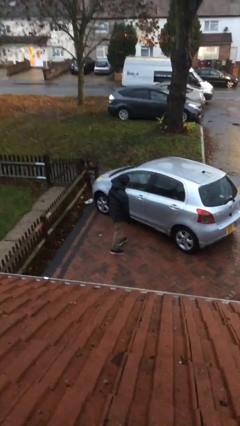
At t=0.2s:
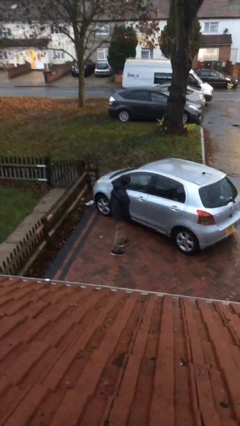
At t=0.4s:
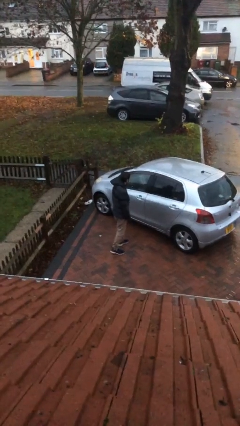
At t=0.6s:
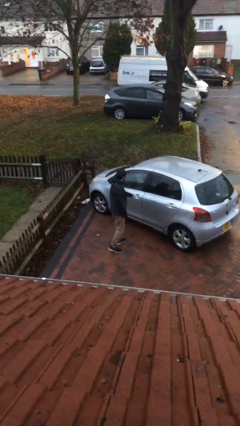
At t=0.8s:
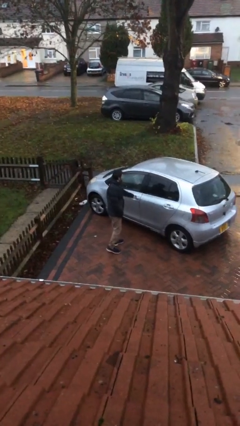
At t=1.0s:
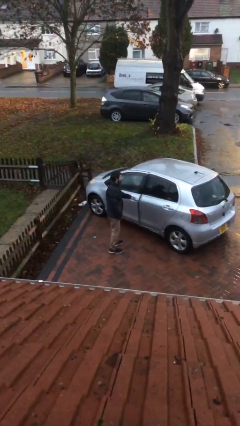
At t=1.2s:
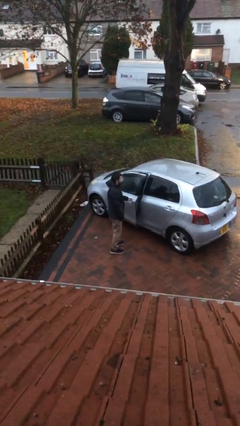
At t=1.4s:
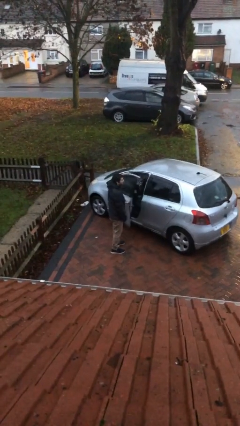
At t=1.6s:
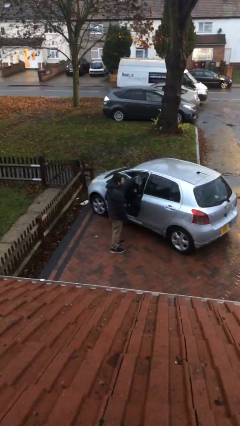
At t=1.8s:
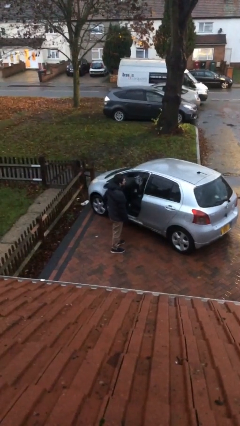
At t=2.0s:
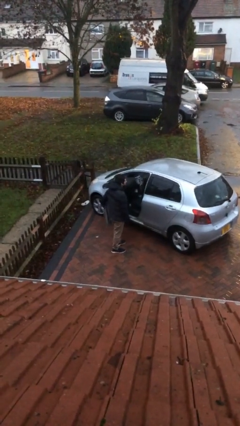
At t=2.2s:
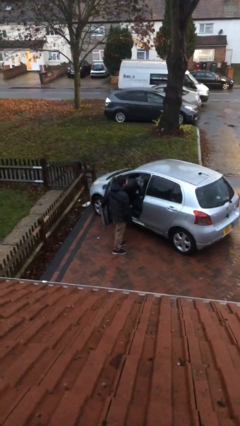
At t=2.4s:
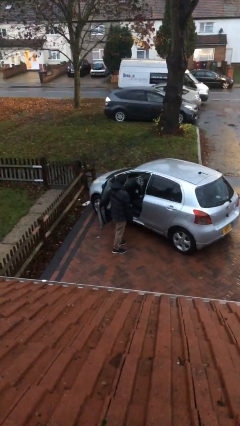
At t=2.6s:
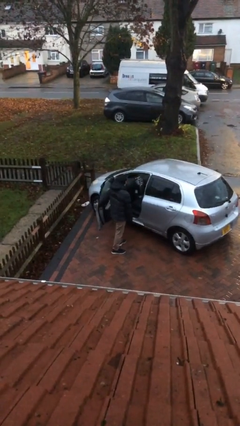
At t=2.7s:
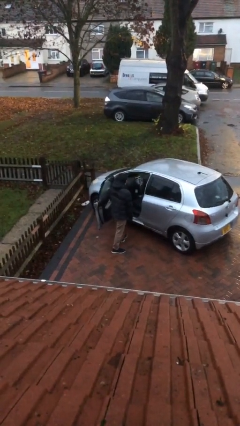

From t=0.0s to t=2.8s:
person opens car door

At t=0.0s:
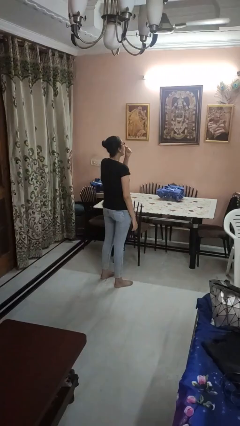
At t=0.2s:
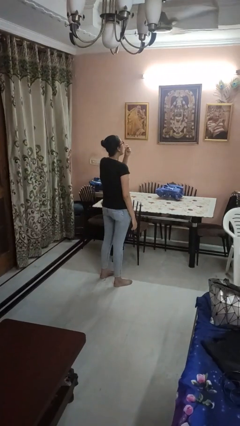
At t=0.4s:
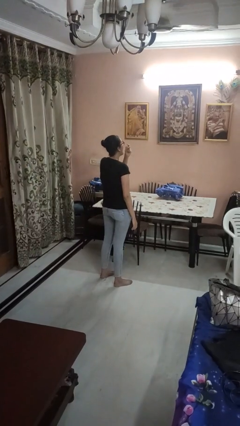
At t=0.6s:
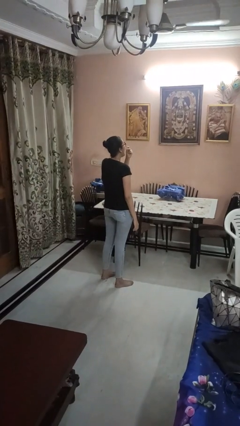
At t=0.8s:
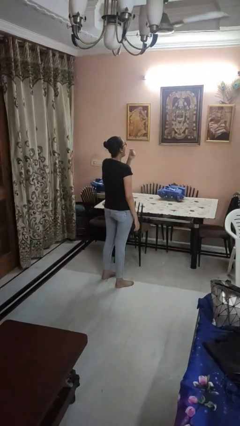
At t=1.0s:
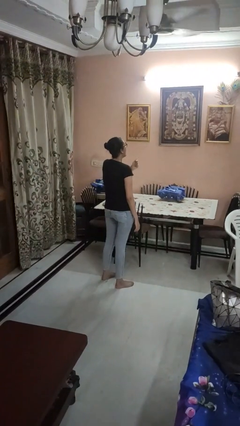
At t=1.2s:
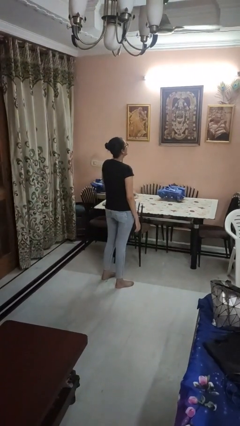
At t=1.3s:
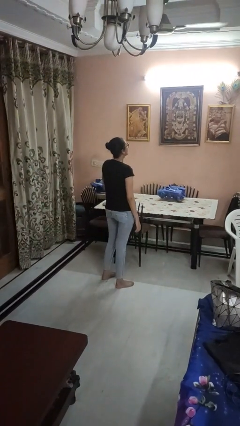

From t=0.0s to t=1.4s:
person yawns

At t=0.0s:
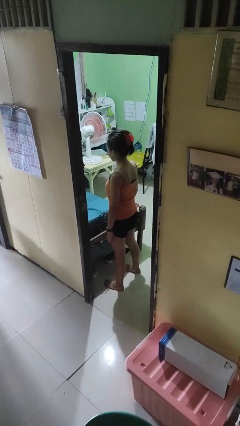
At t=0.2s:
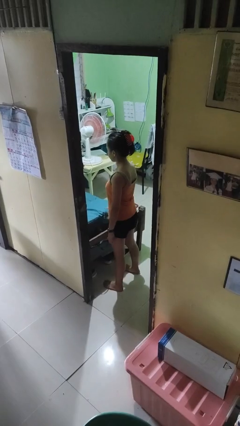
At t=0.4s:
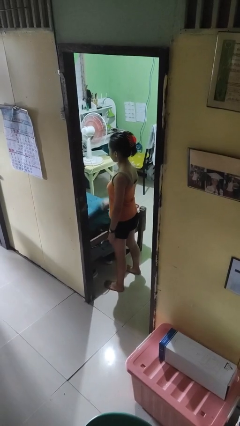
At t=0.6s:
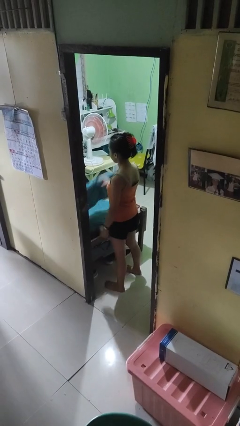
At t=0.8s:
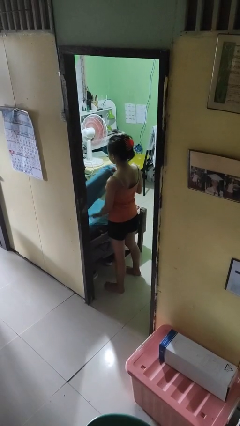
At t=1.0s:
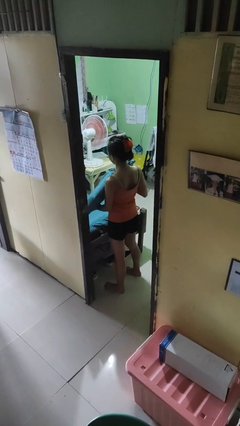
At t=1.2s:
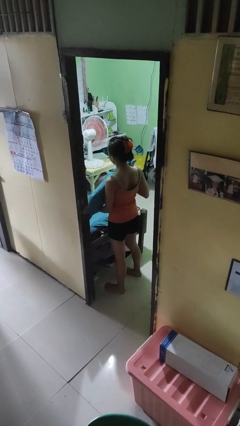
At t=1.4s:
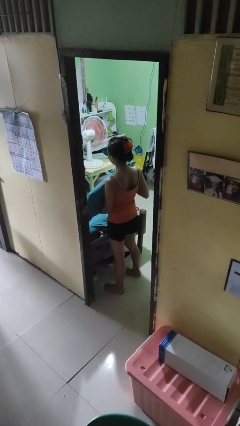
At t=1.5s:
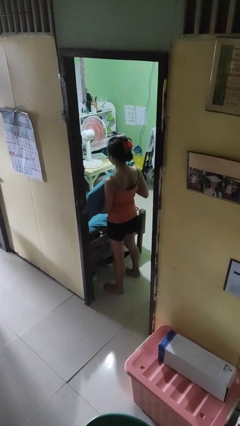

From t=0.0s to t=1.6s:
person picks up object from bed

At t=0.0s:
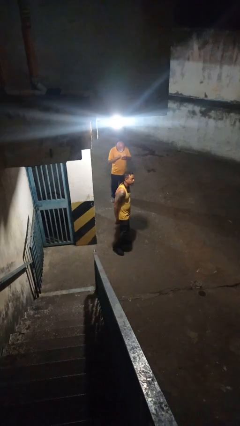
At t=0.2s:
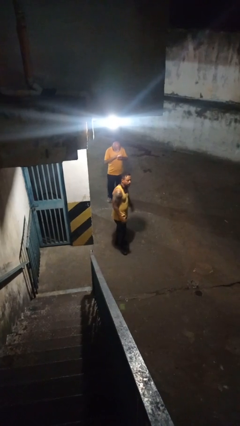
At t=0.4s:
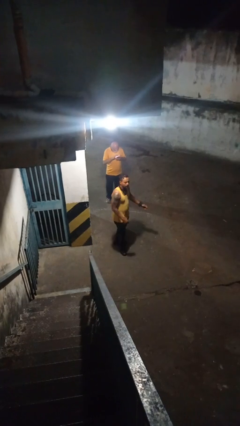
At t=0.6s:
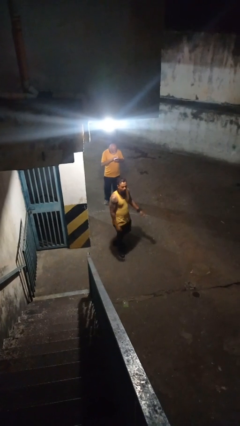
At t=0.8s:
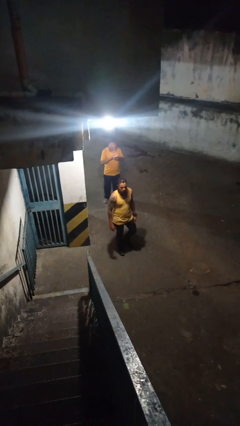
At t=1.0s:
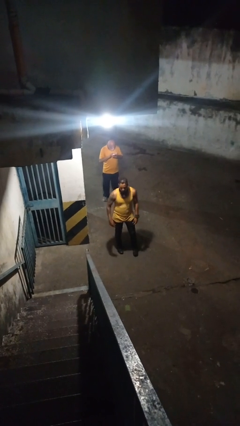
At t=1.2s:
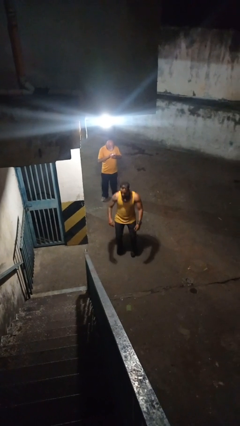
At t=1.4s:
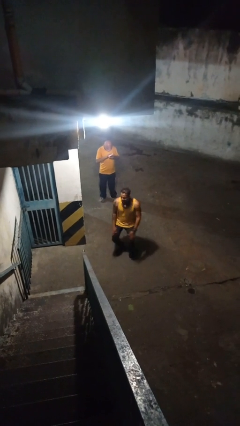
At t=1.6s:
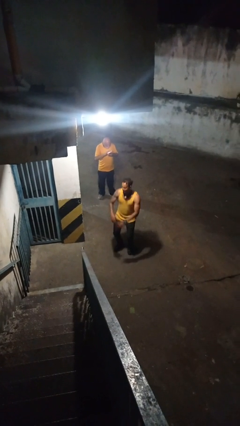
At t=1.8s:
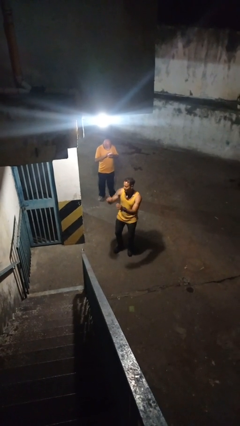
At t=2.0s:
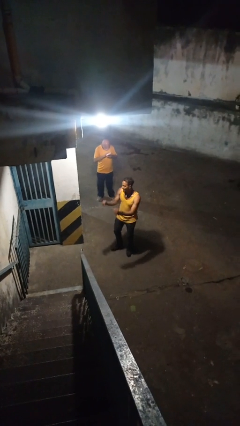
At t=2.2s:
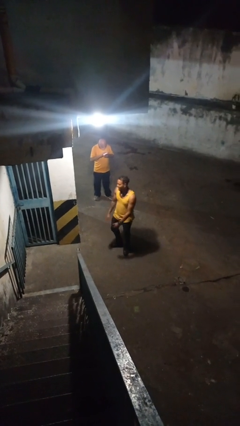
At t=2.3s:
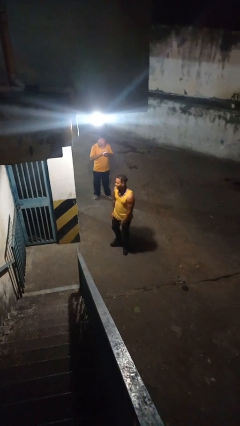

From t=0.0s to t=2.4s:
person slaps hands on thighs

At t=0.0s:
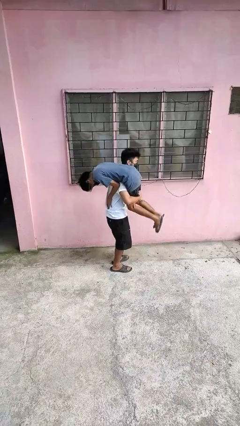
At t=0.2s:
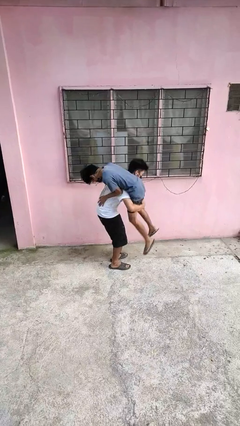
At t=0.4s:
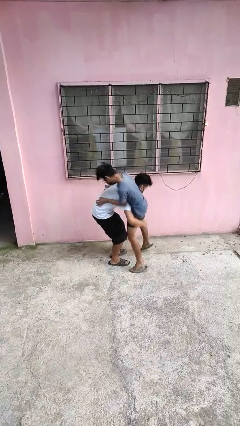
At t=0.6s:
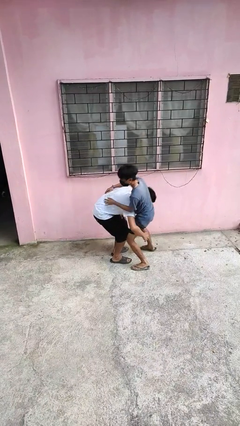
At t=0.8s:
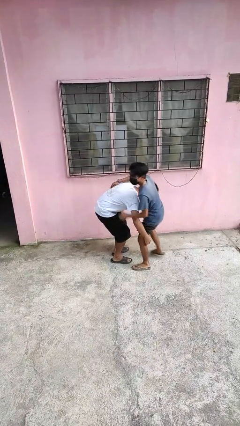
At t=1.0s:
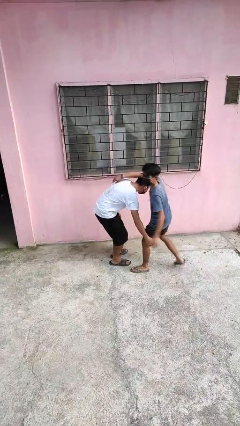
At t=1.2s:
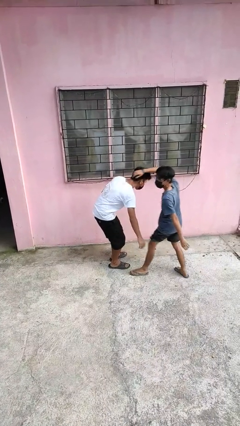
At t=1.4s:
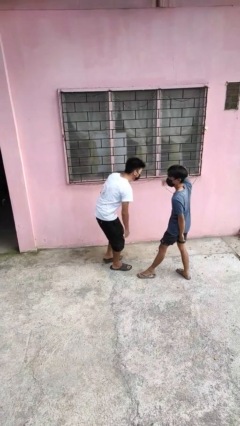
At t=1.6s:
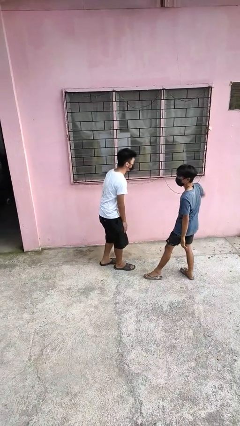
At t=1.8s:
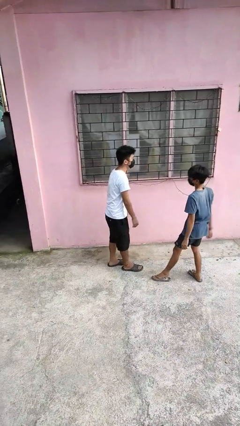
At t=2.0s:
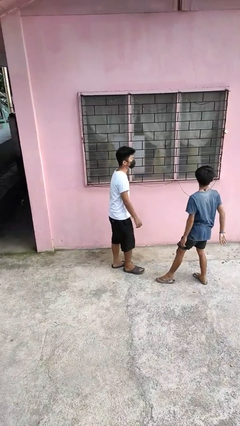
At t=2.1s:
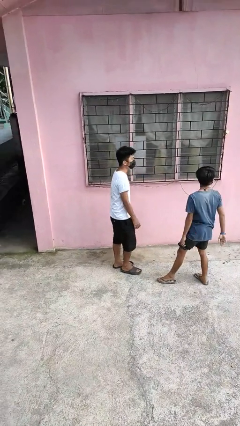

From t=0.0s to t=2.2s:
person puts down person

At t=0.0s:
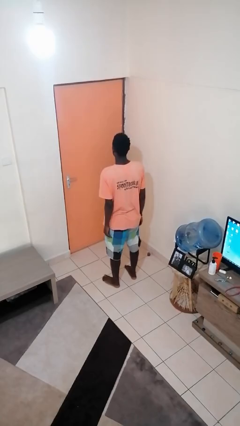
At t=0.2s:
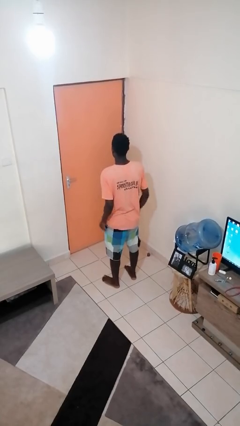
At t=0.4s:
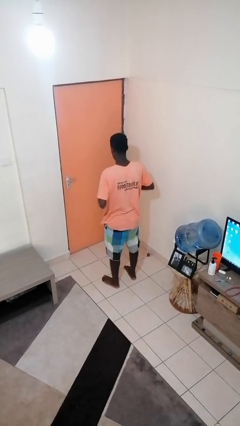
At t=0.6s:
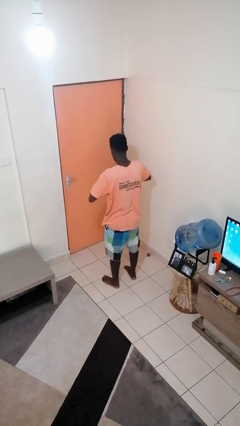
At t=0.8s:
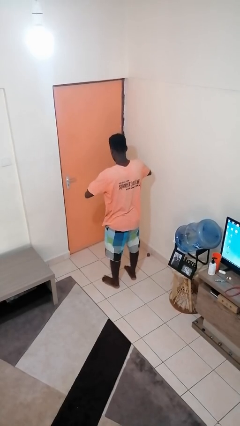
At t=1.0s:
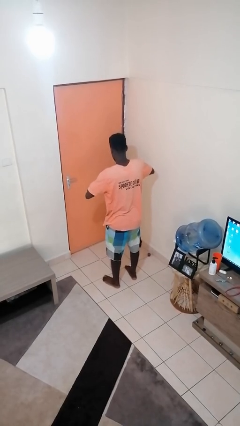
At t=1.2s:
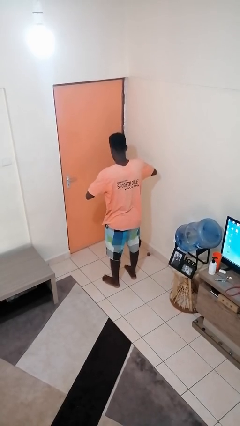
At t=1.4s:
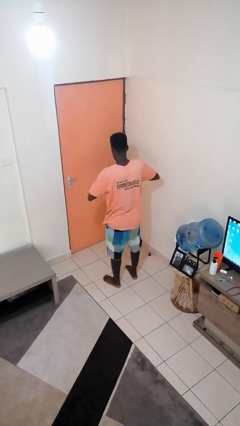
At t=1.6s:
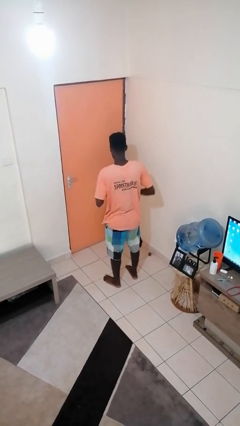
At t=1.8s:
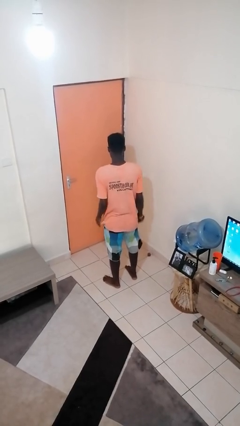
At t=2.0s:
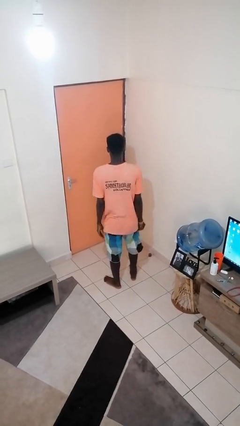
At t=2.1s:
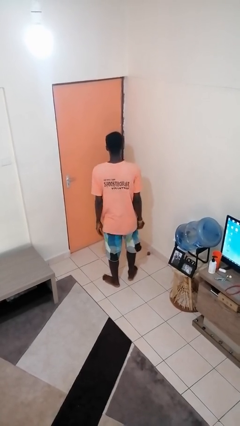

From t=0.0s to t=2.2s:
person takes off ring

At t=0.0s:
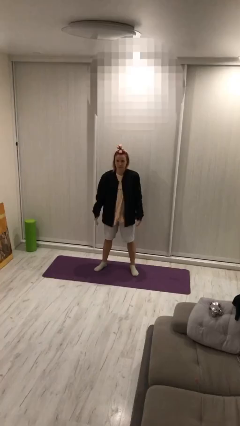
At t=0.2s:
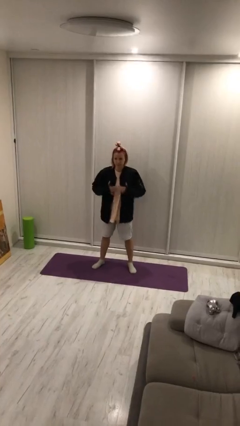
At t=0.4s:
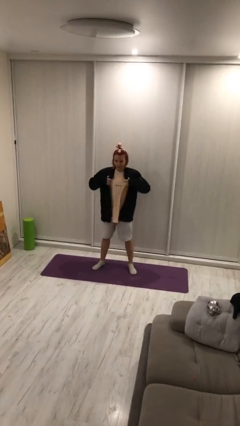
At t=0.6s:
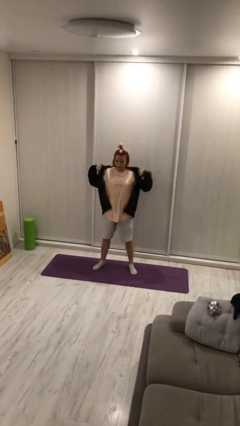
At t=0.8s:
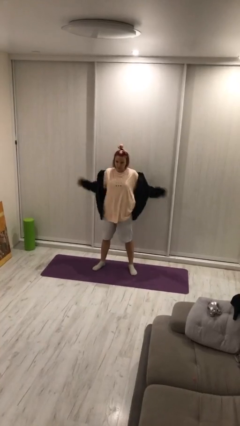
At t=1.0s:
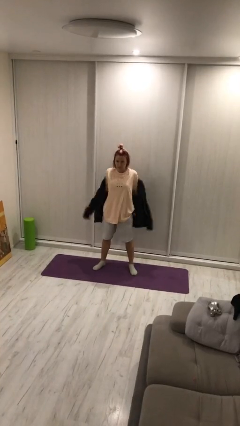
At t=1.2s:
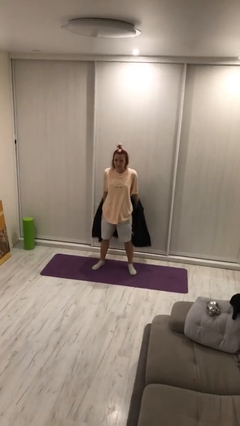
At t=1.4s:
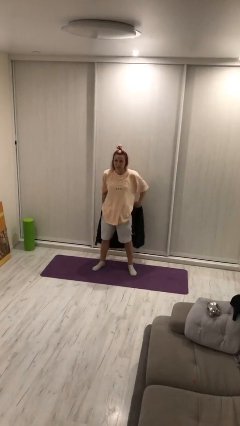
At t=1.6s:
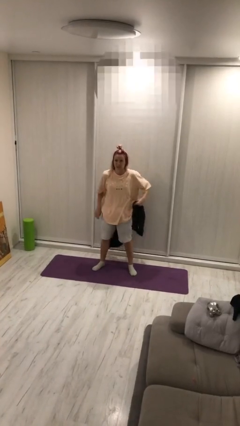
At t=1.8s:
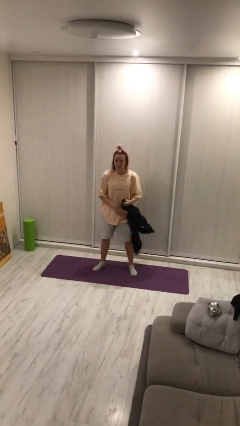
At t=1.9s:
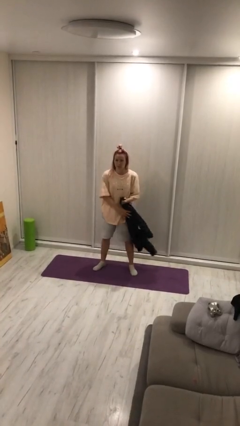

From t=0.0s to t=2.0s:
person takes off jacket

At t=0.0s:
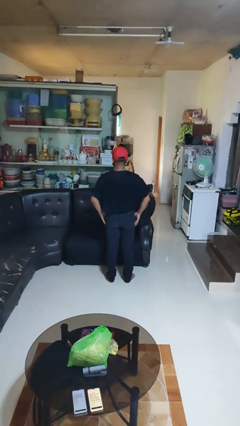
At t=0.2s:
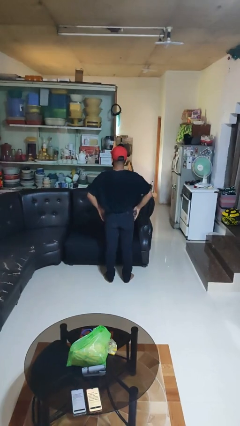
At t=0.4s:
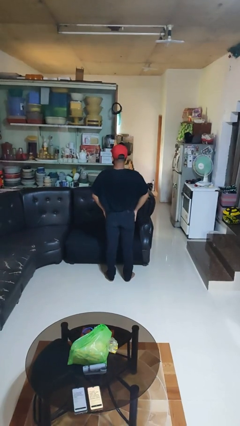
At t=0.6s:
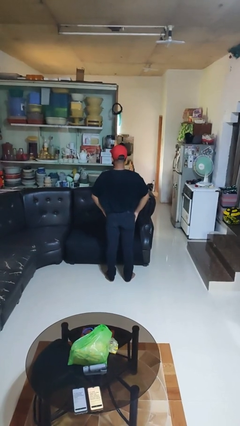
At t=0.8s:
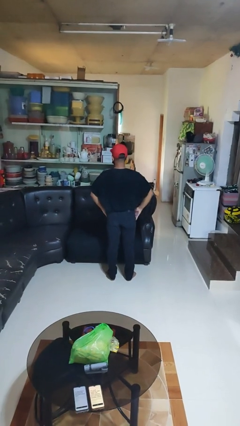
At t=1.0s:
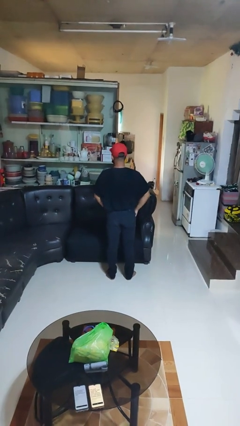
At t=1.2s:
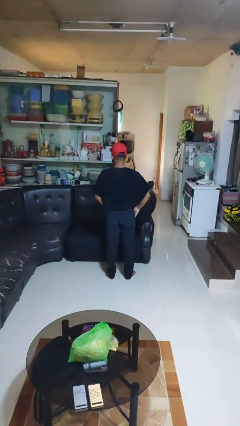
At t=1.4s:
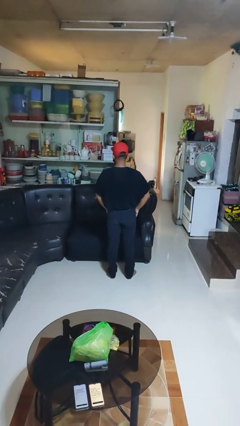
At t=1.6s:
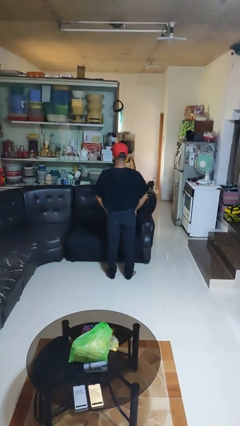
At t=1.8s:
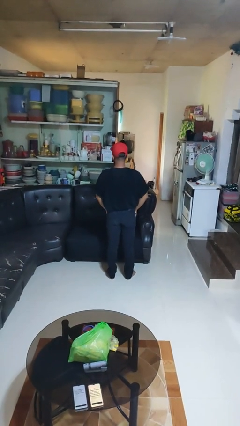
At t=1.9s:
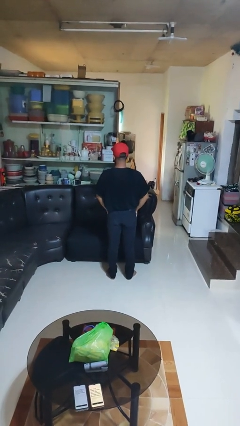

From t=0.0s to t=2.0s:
person puts hands in back pockets

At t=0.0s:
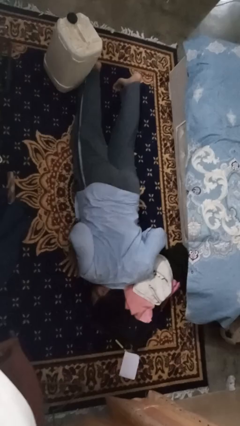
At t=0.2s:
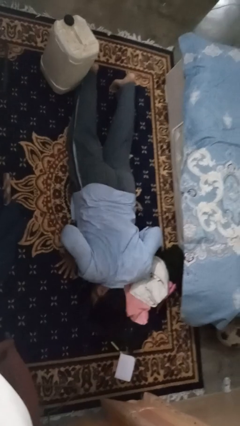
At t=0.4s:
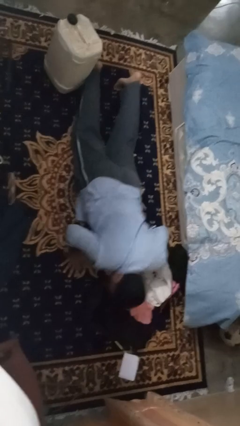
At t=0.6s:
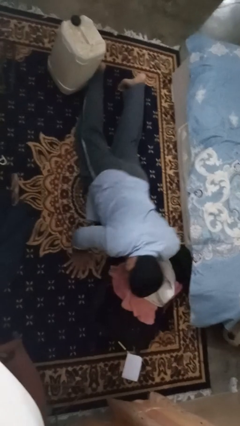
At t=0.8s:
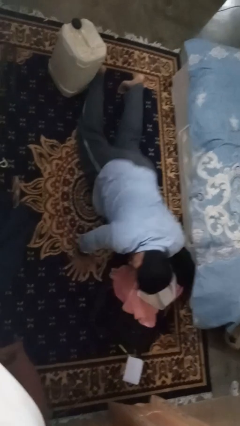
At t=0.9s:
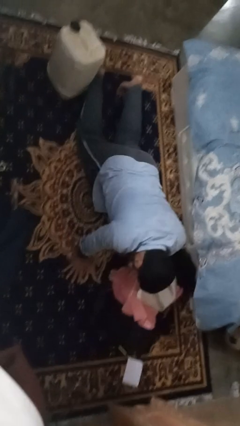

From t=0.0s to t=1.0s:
person lies down on floor
